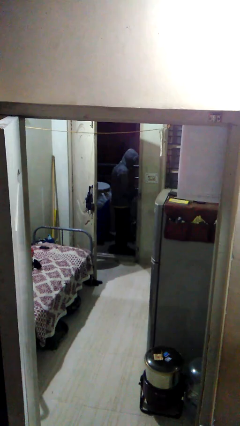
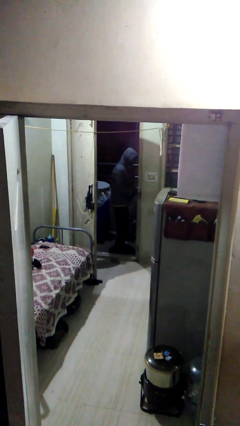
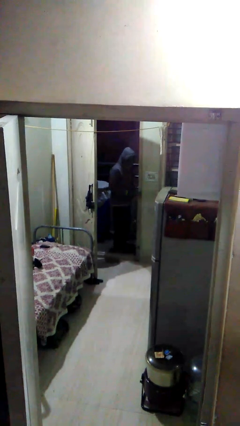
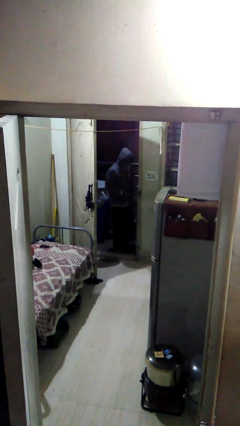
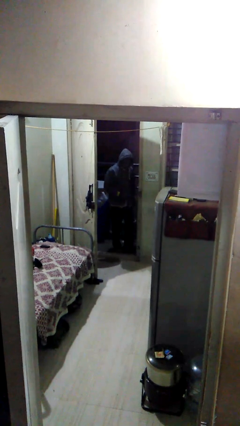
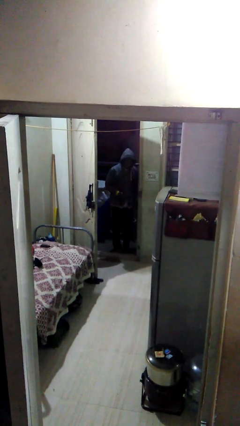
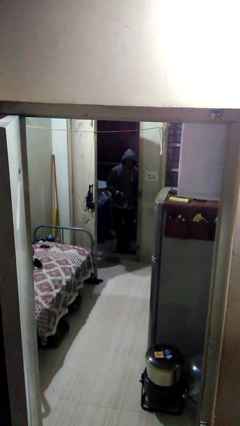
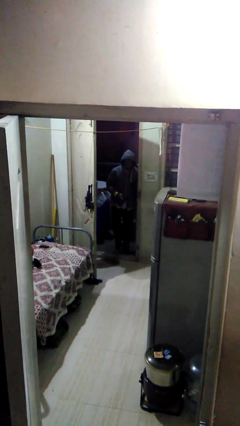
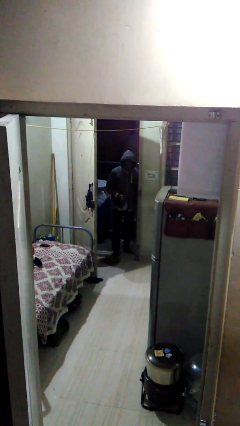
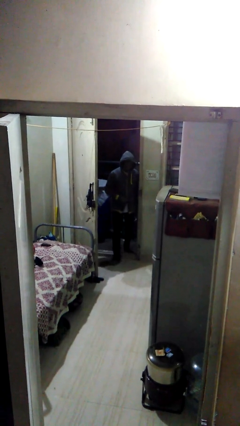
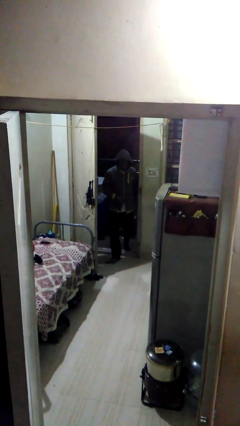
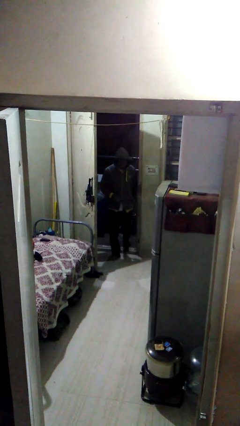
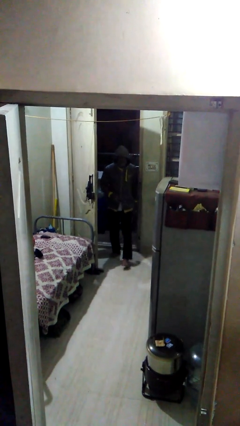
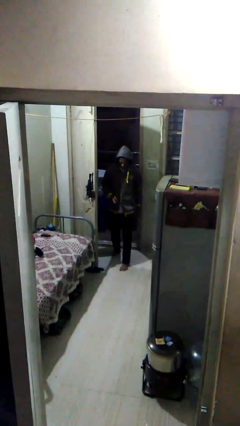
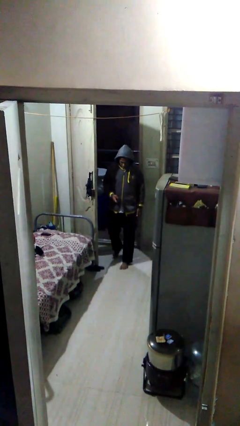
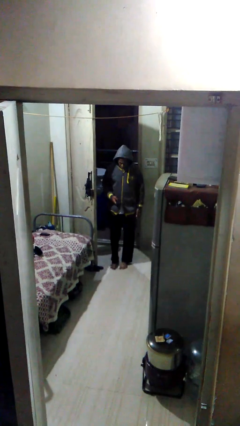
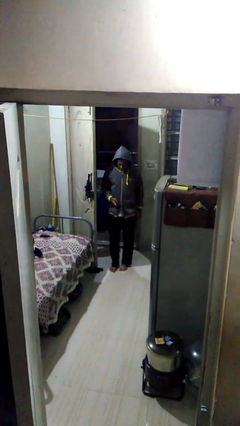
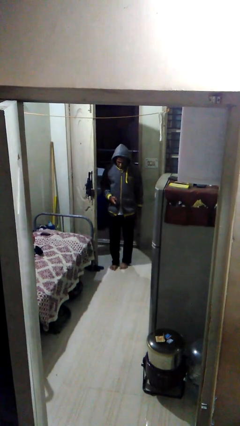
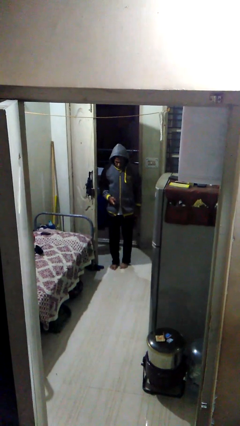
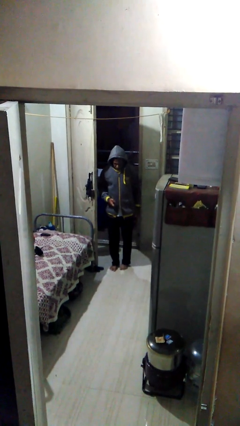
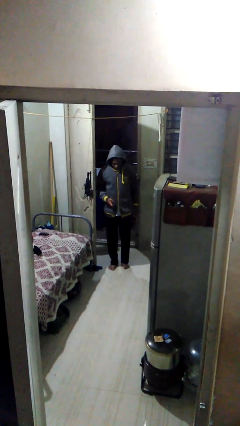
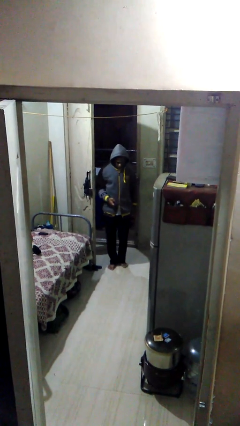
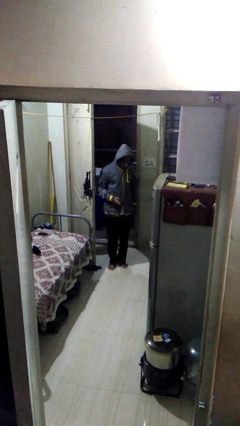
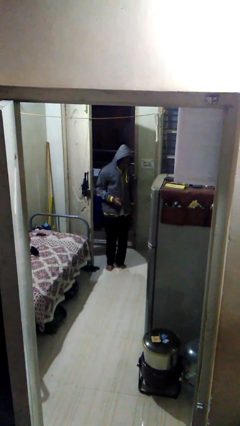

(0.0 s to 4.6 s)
person enters scene through structure

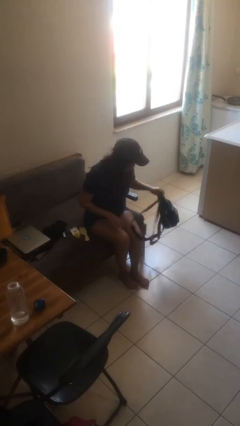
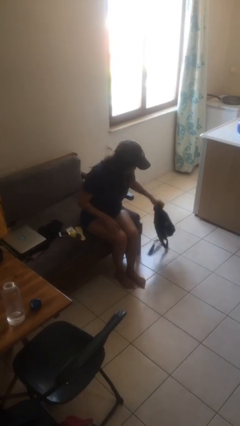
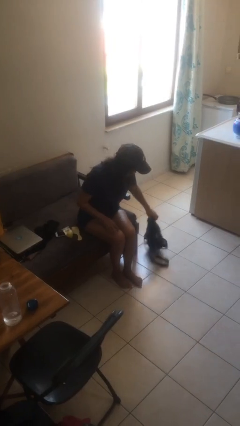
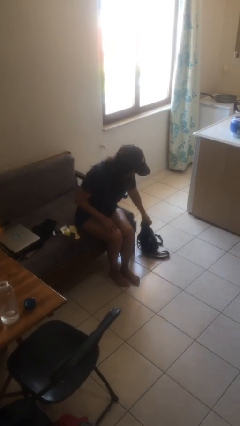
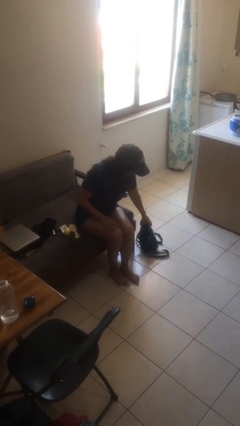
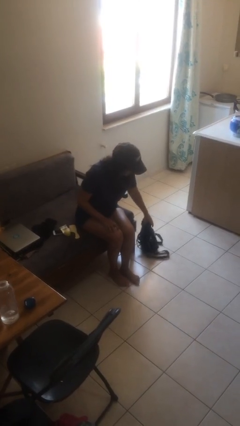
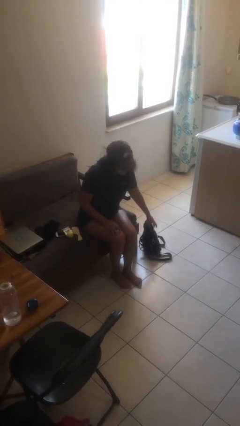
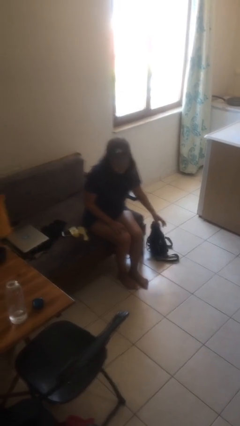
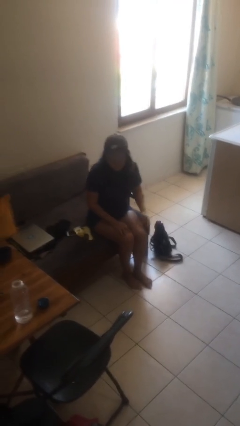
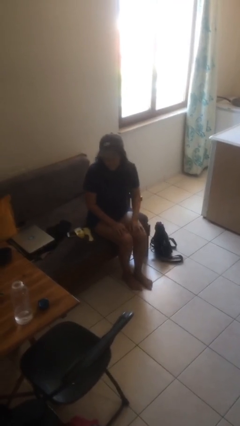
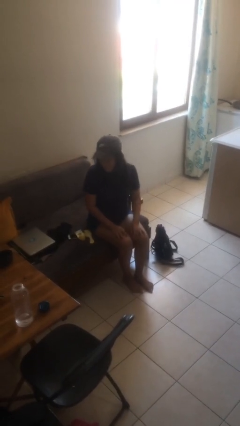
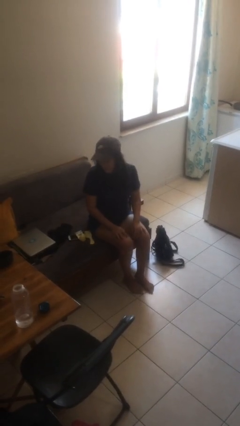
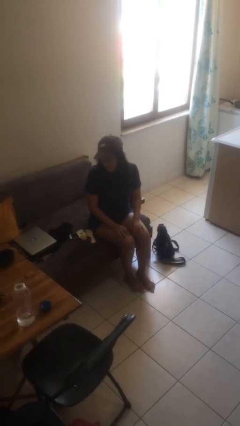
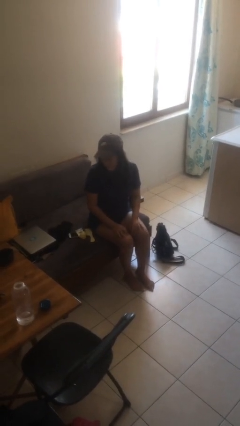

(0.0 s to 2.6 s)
person puts down object on floor

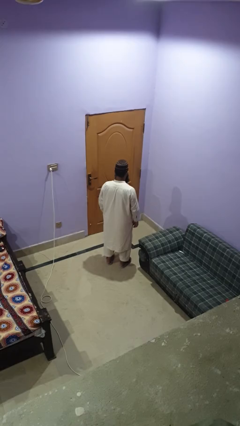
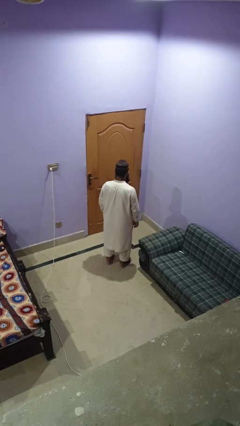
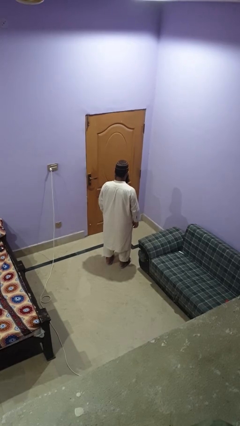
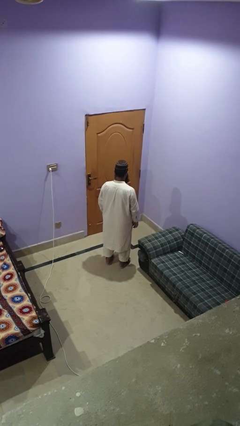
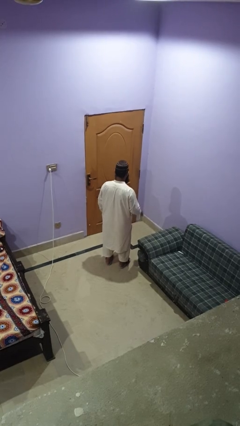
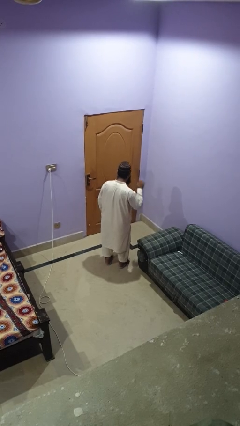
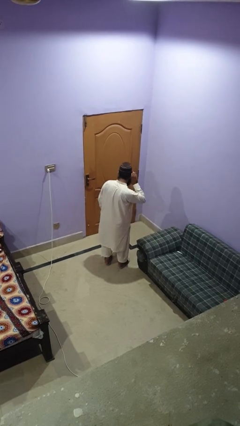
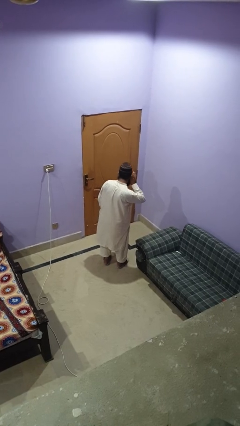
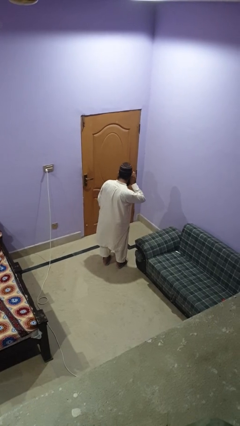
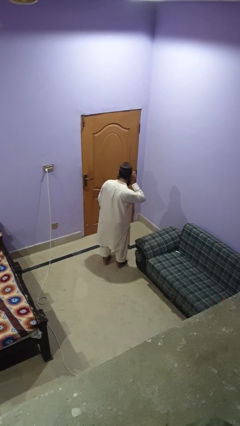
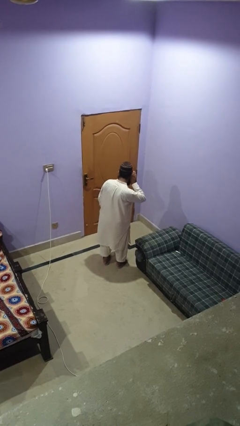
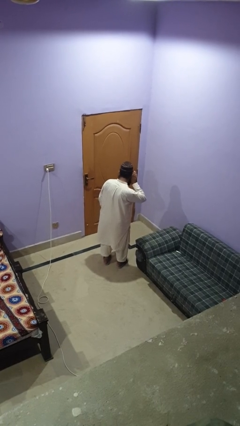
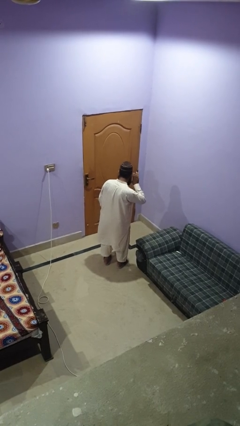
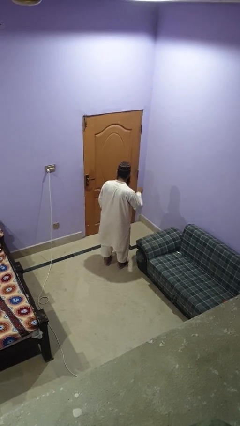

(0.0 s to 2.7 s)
person gestures listen closely

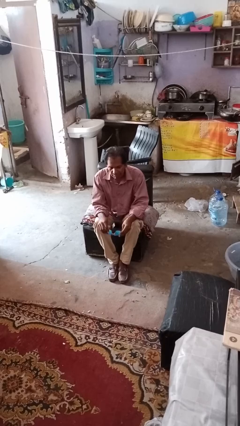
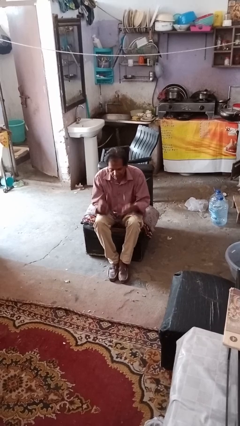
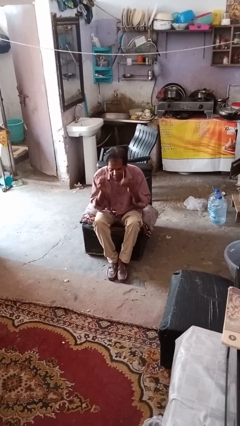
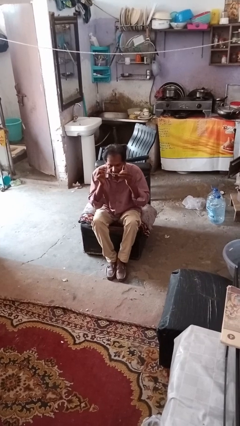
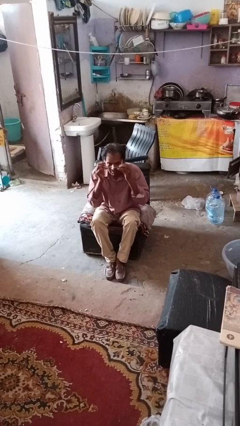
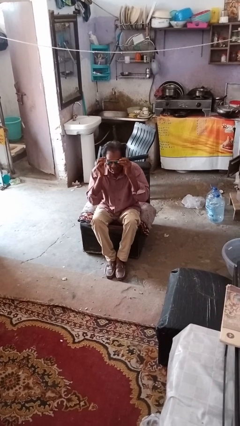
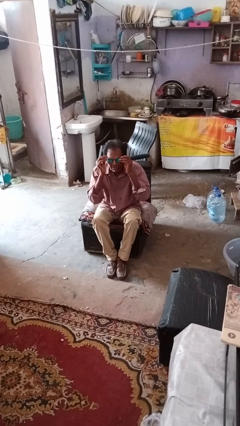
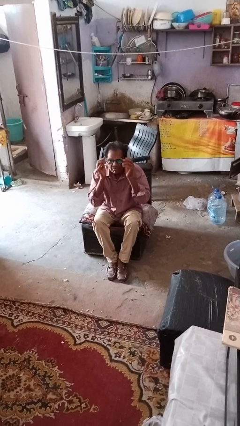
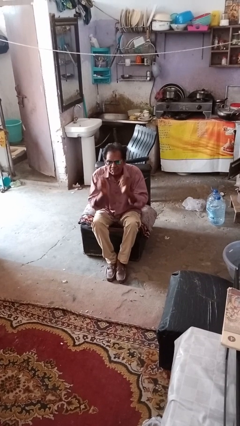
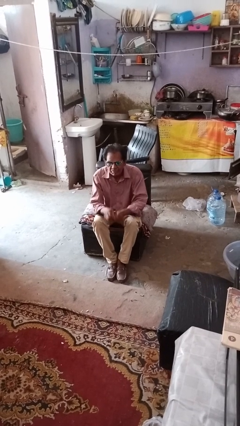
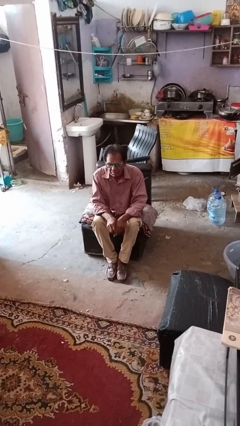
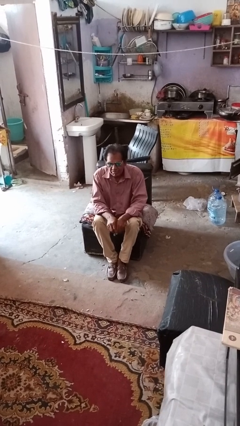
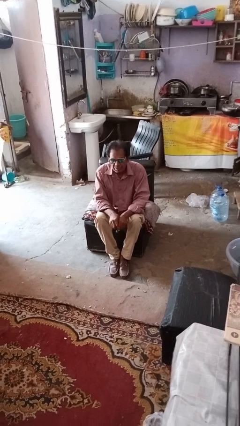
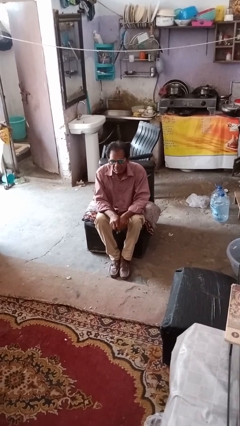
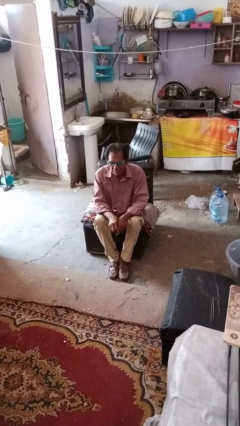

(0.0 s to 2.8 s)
person puts on sunglasses

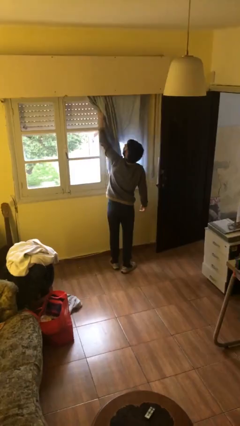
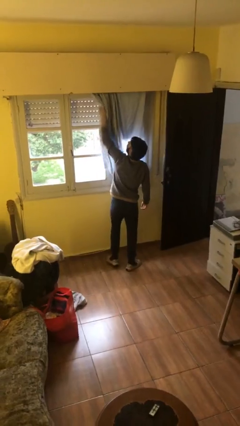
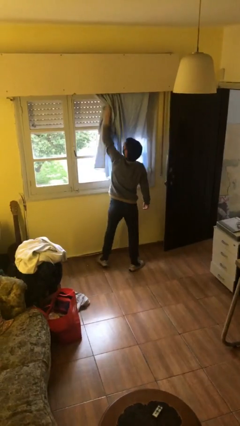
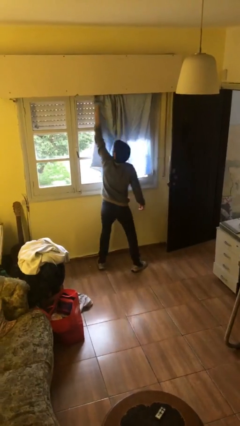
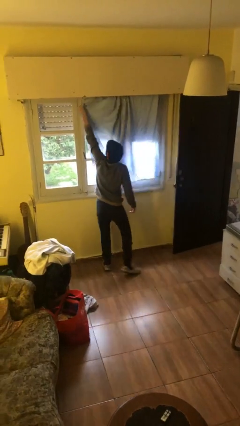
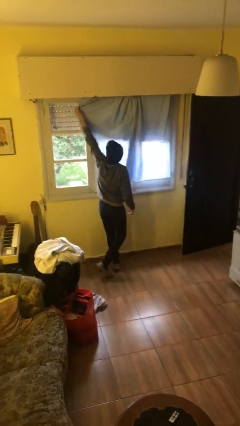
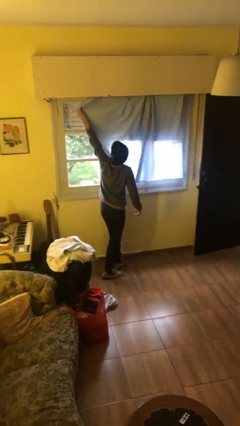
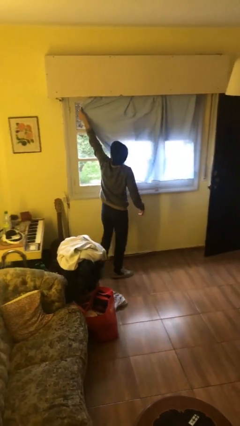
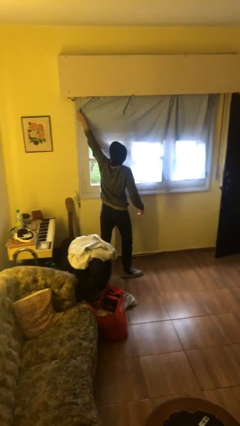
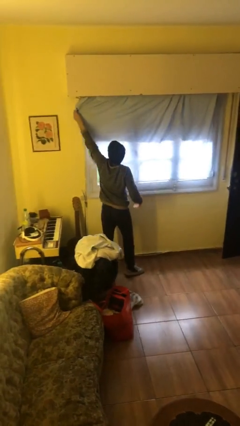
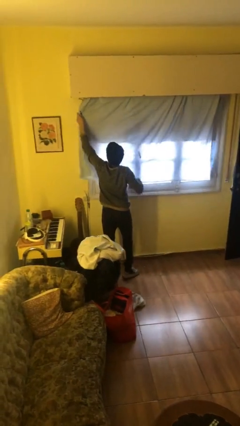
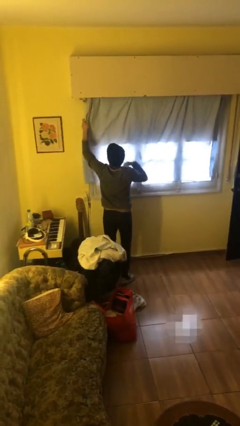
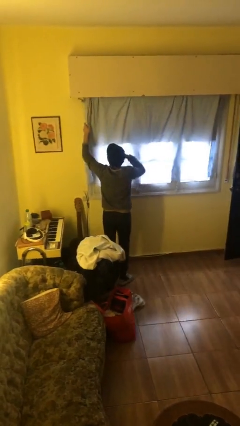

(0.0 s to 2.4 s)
person closes curtains

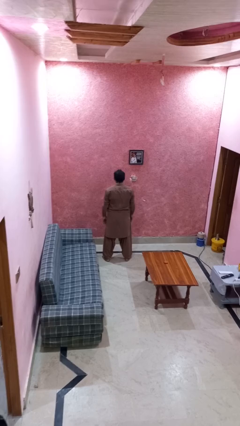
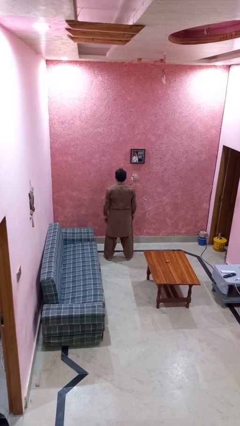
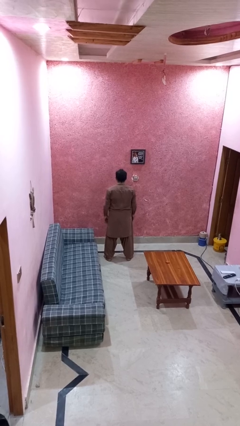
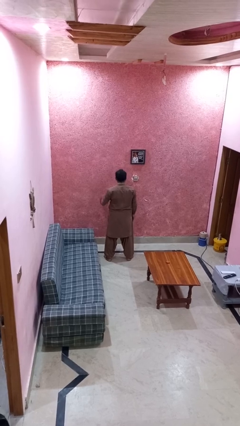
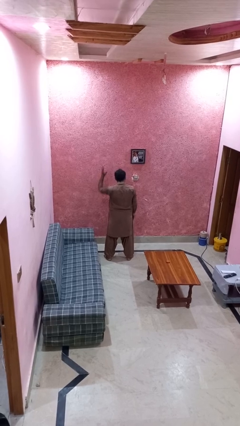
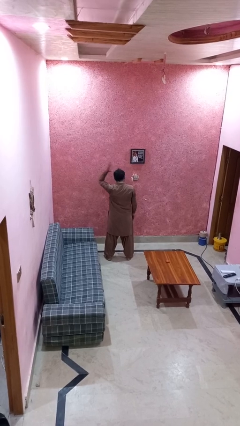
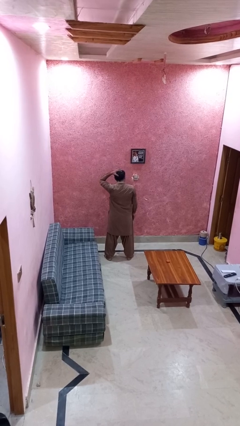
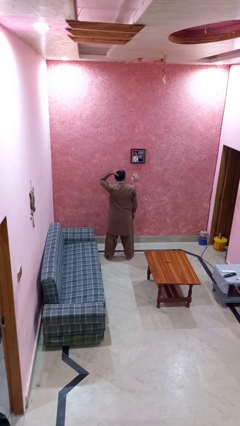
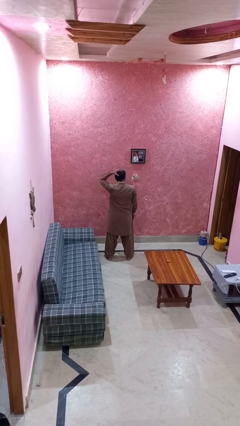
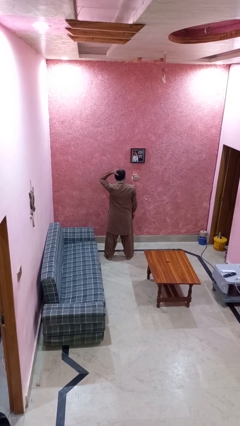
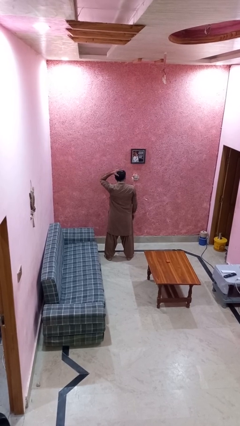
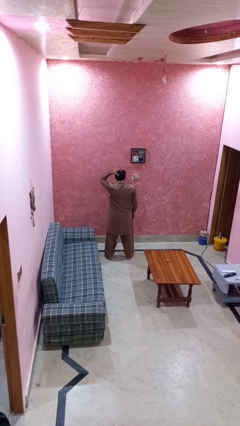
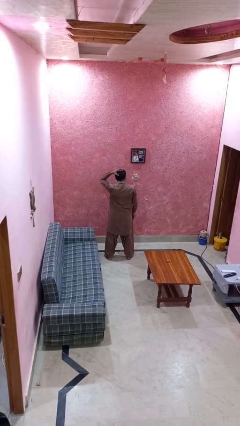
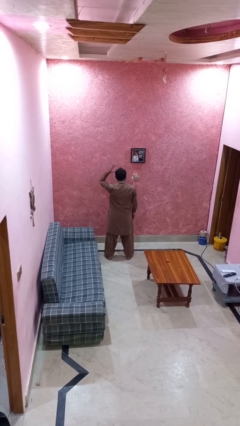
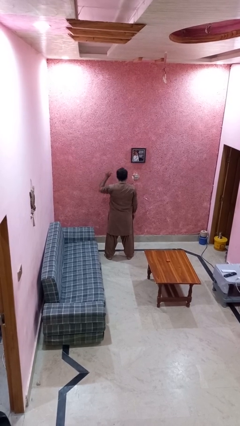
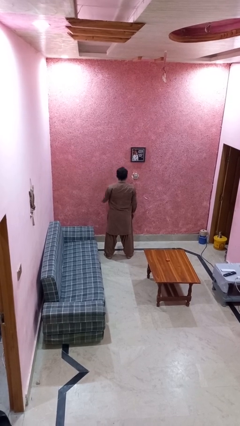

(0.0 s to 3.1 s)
person pats head
